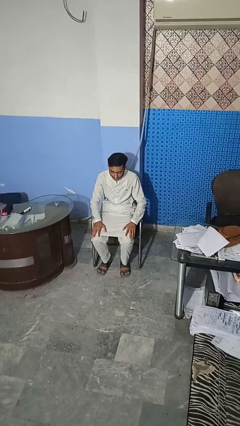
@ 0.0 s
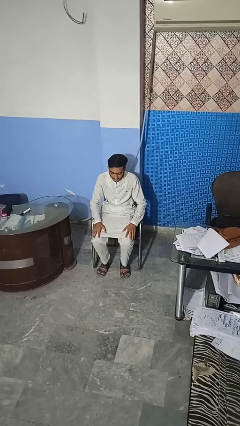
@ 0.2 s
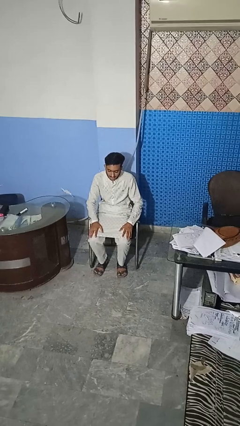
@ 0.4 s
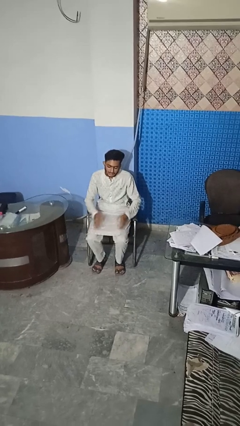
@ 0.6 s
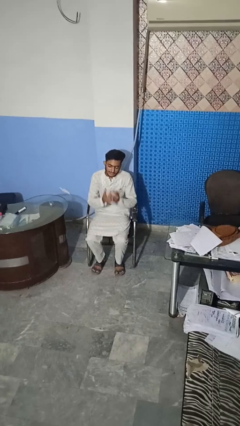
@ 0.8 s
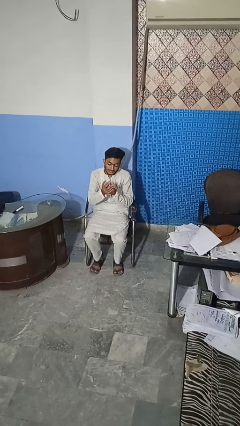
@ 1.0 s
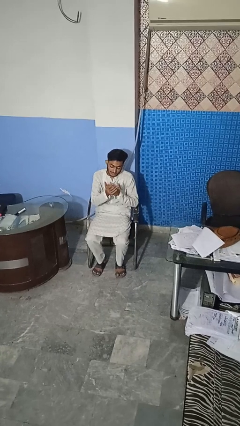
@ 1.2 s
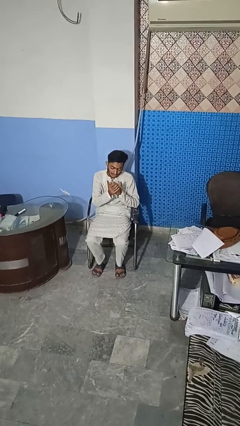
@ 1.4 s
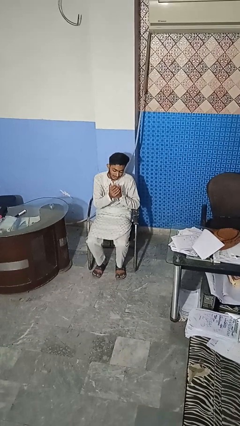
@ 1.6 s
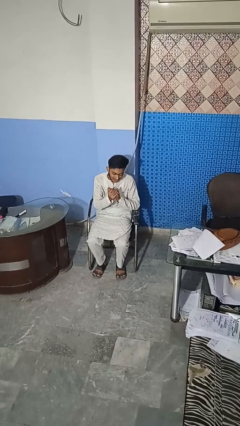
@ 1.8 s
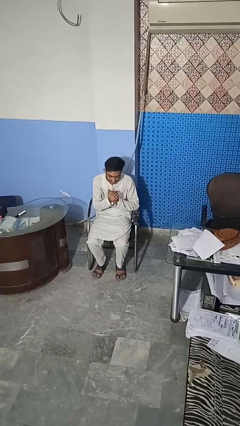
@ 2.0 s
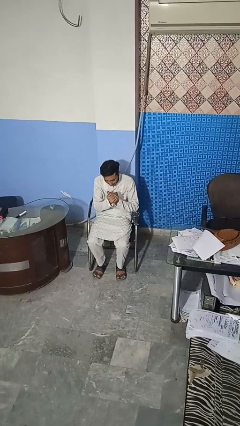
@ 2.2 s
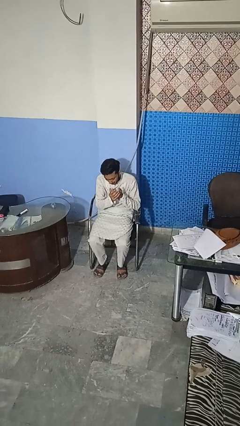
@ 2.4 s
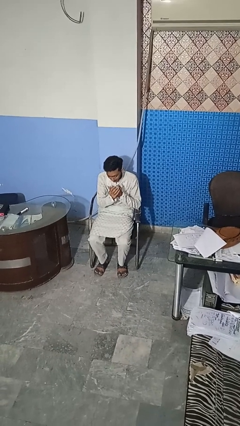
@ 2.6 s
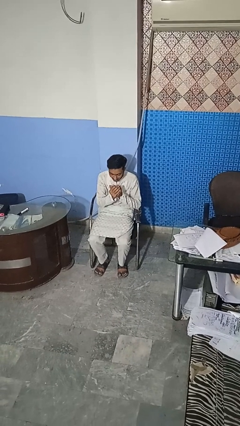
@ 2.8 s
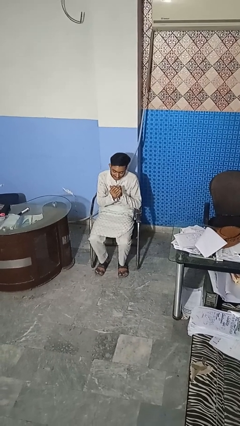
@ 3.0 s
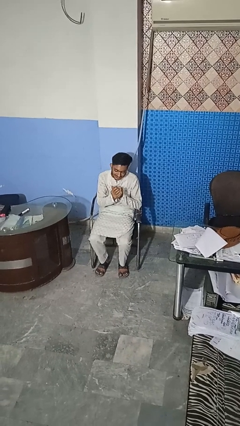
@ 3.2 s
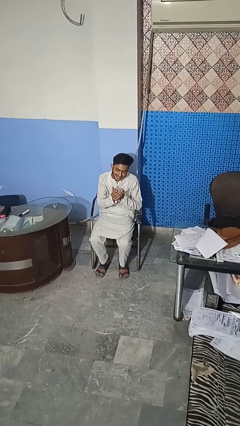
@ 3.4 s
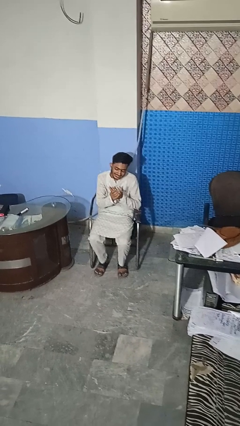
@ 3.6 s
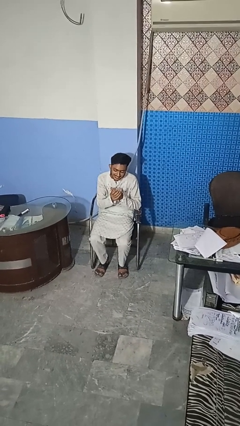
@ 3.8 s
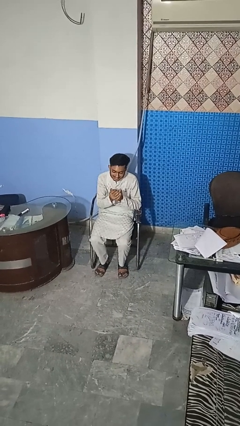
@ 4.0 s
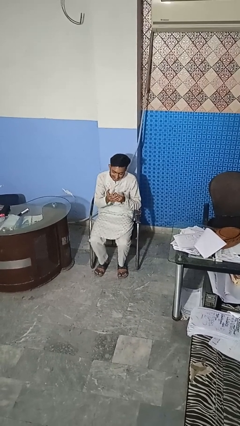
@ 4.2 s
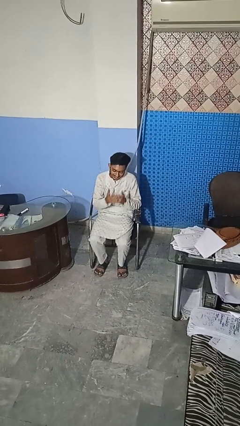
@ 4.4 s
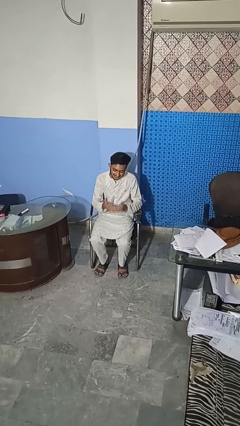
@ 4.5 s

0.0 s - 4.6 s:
person prays

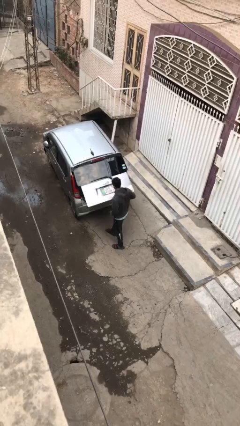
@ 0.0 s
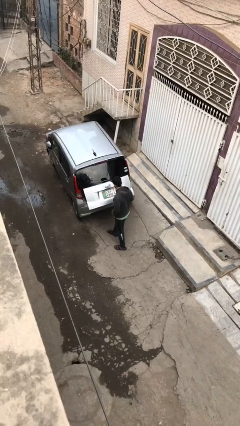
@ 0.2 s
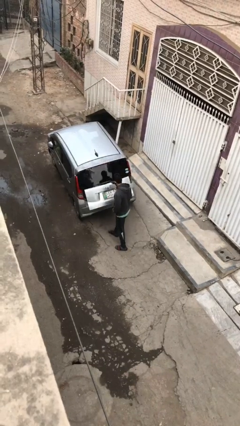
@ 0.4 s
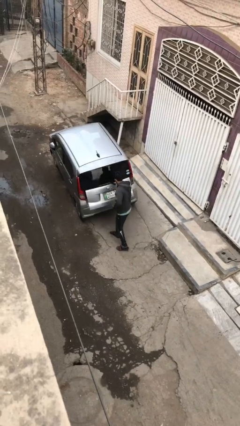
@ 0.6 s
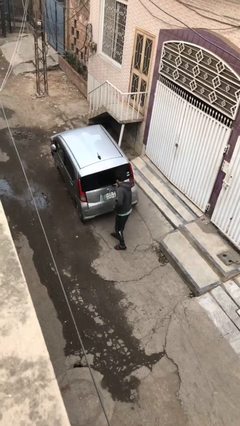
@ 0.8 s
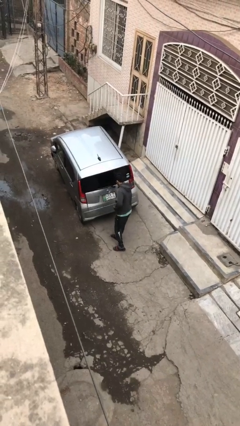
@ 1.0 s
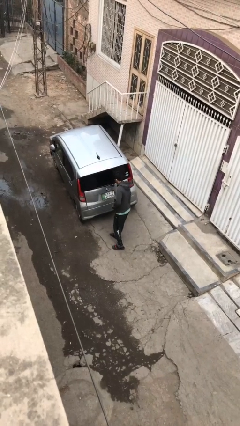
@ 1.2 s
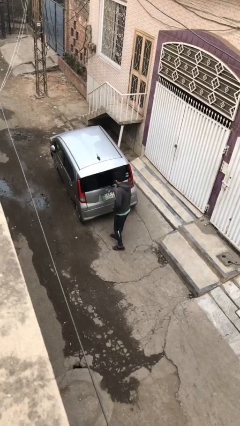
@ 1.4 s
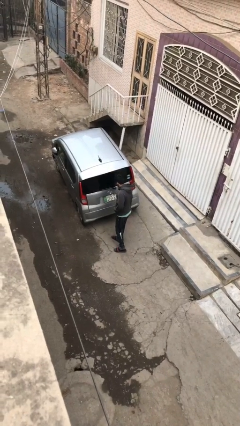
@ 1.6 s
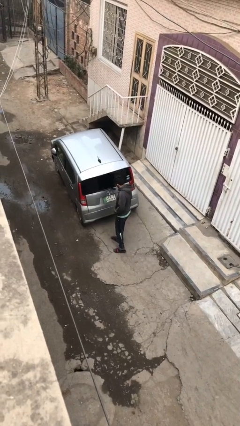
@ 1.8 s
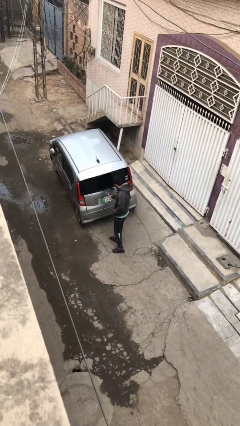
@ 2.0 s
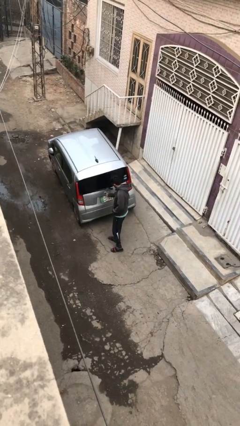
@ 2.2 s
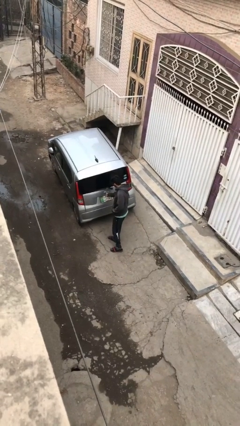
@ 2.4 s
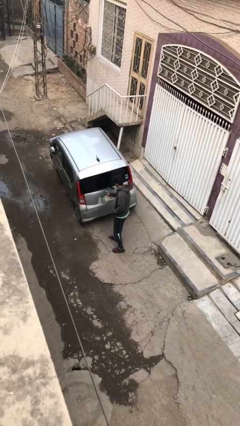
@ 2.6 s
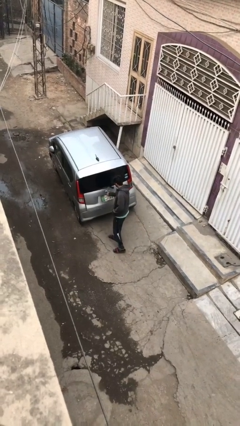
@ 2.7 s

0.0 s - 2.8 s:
person closes car trunk

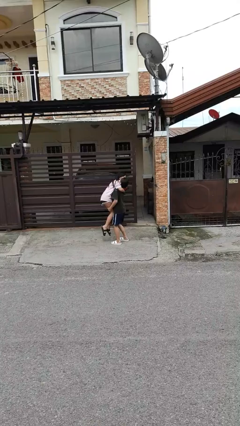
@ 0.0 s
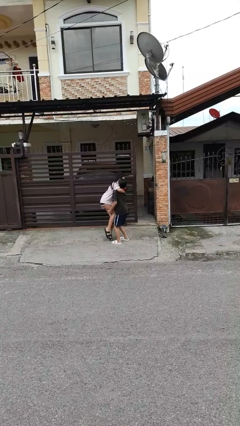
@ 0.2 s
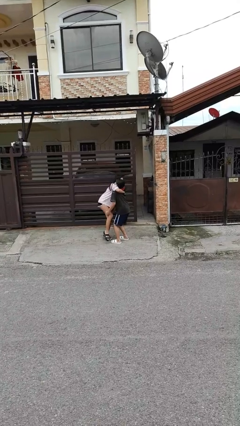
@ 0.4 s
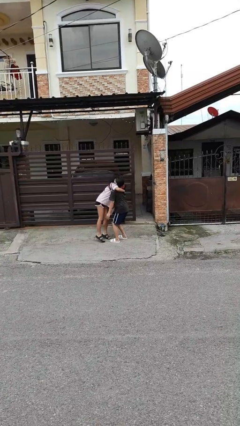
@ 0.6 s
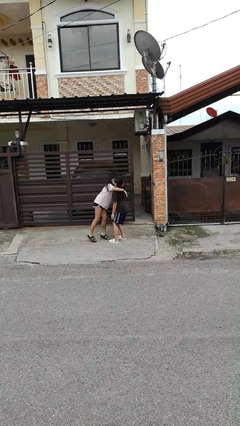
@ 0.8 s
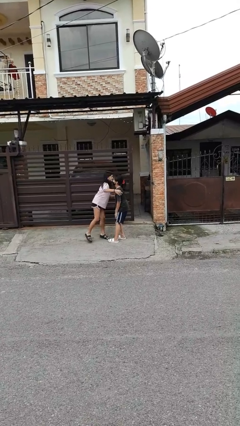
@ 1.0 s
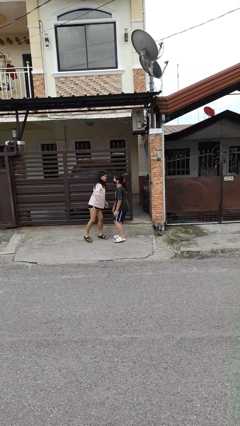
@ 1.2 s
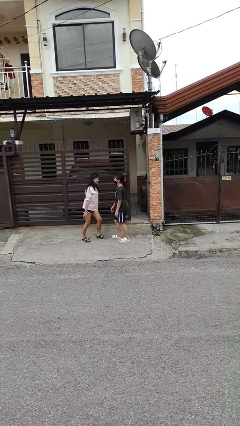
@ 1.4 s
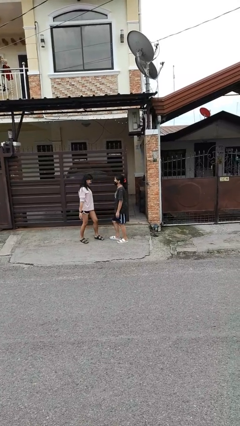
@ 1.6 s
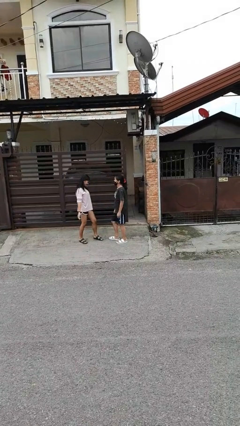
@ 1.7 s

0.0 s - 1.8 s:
person puts down person

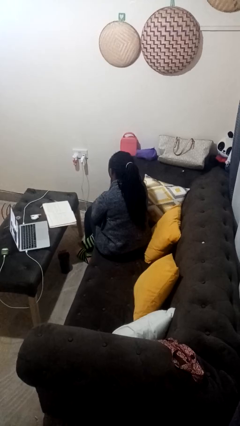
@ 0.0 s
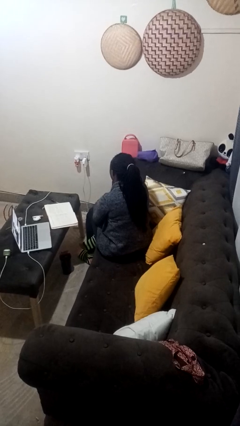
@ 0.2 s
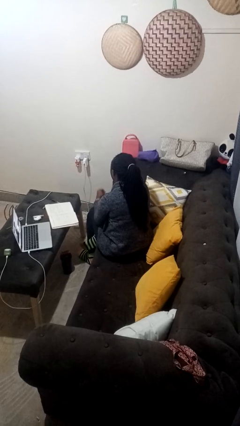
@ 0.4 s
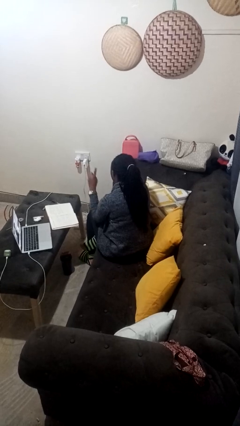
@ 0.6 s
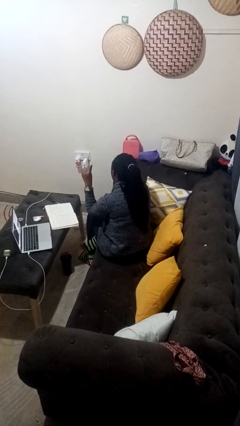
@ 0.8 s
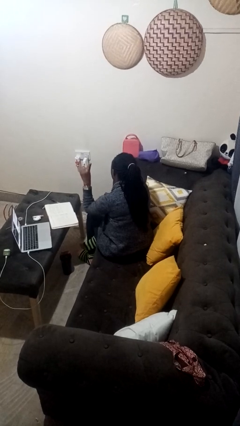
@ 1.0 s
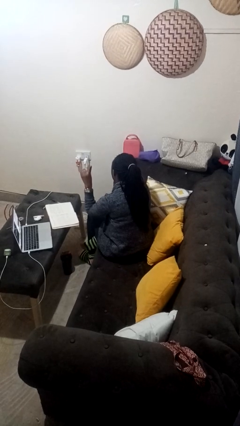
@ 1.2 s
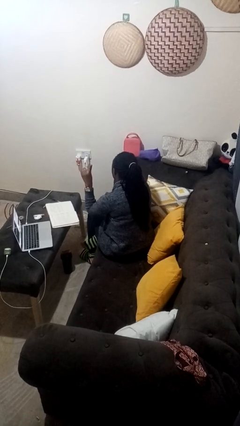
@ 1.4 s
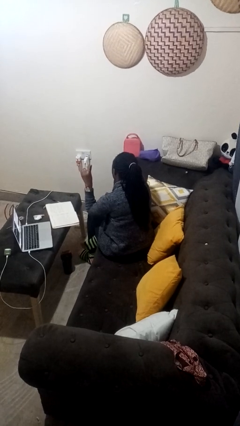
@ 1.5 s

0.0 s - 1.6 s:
person gestures number one

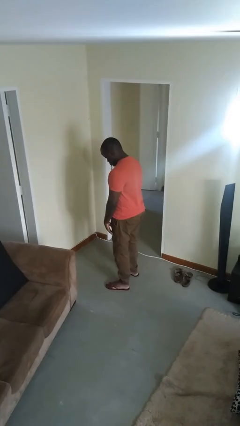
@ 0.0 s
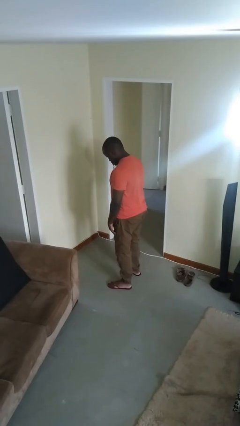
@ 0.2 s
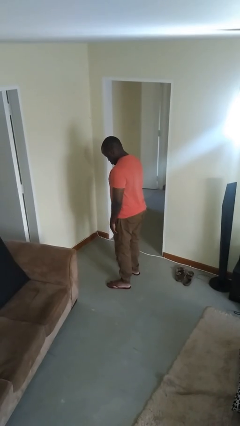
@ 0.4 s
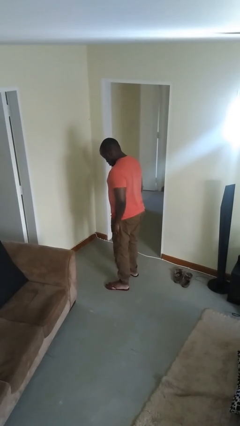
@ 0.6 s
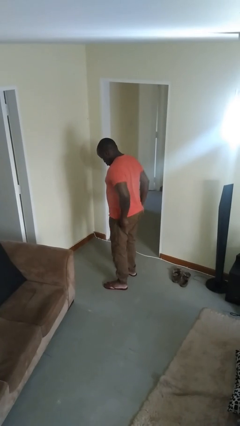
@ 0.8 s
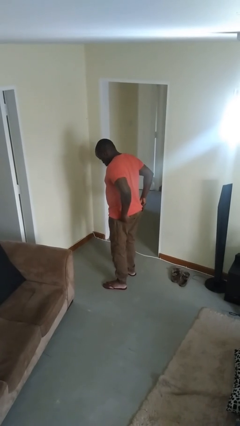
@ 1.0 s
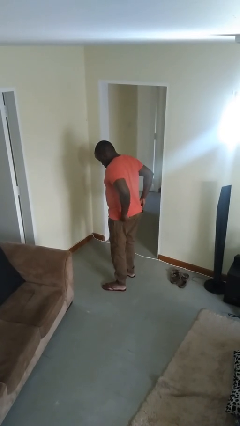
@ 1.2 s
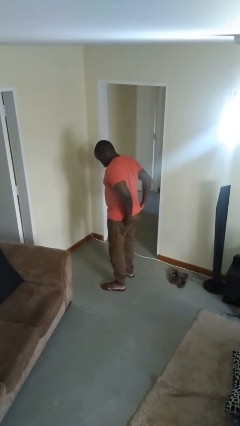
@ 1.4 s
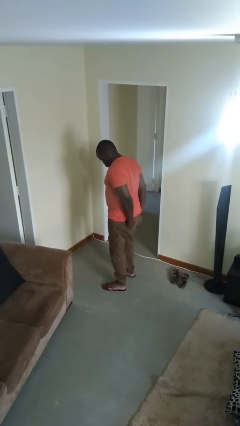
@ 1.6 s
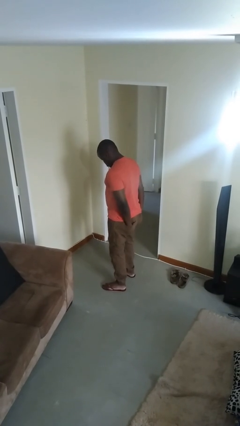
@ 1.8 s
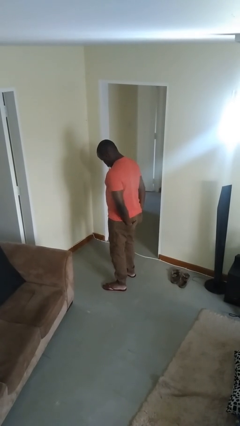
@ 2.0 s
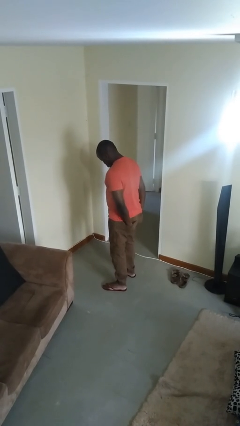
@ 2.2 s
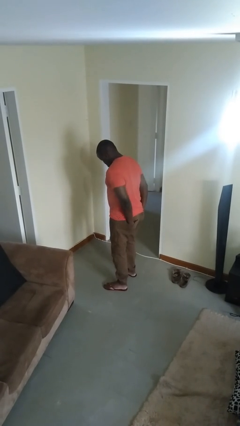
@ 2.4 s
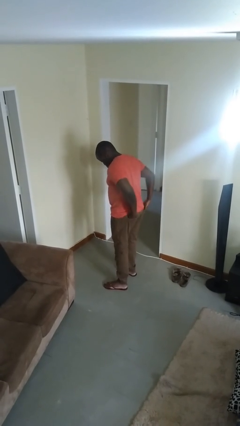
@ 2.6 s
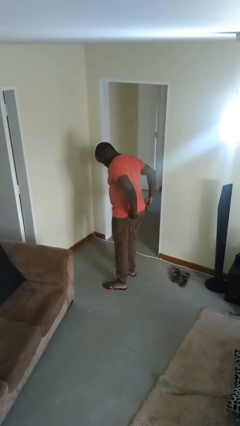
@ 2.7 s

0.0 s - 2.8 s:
person puts hands in back pockets

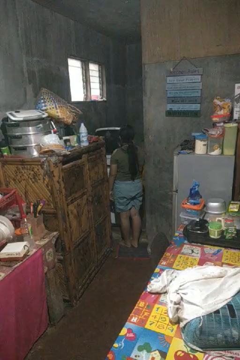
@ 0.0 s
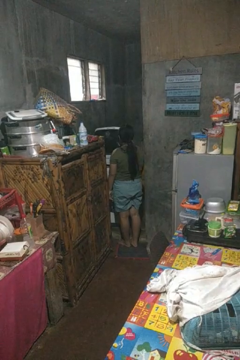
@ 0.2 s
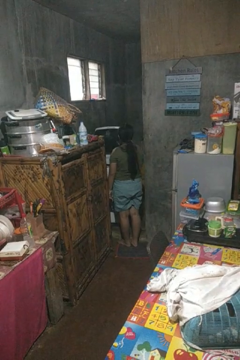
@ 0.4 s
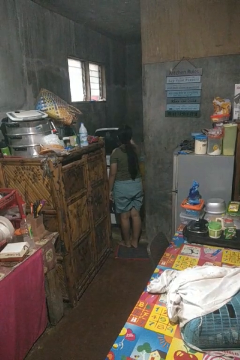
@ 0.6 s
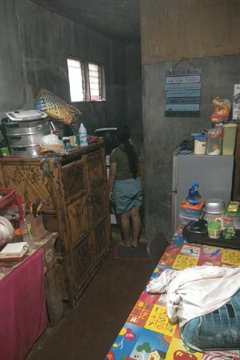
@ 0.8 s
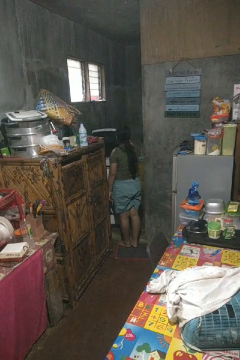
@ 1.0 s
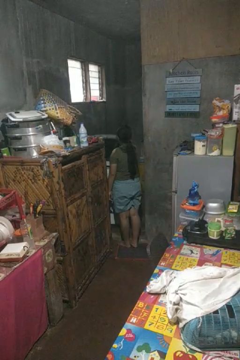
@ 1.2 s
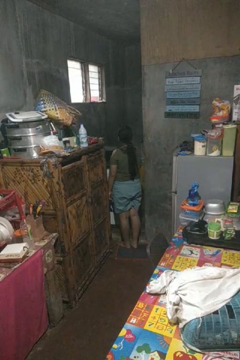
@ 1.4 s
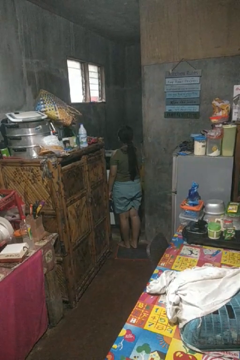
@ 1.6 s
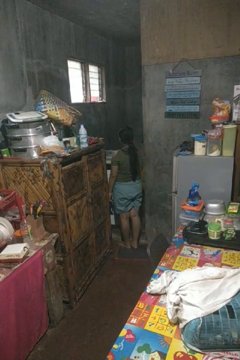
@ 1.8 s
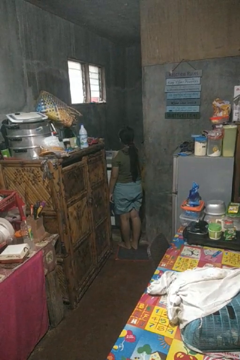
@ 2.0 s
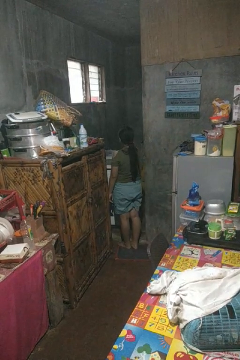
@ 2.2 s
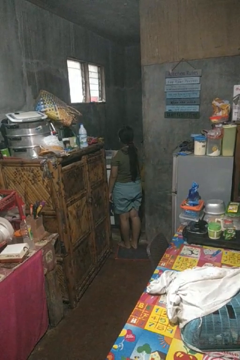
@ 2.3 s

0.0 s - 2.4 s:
person closes clothes washer

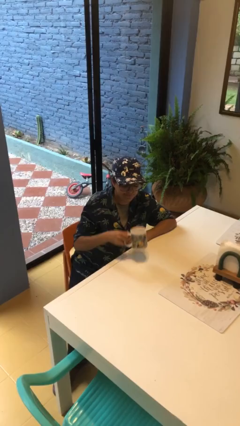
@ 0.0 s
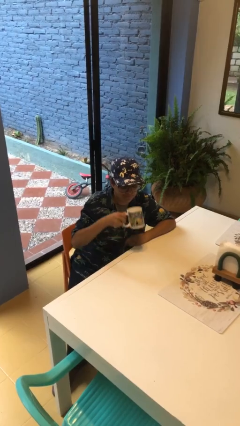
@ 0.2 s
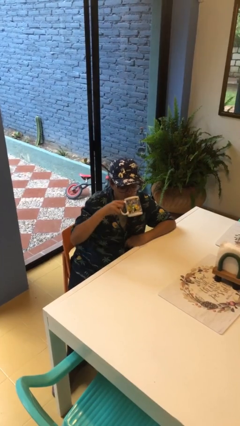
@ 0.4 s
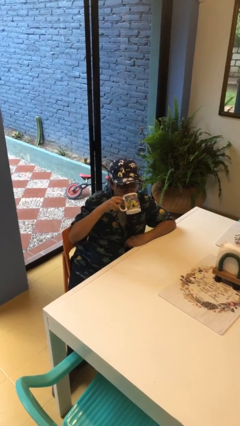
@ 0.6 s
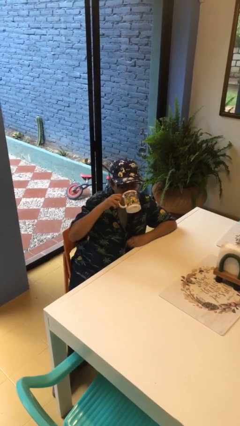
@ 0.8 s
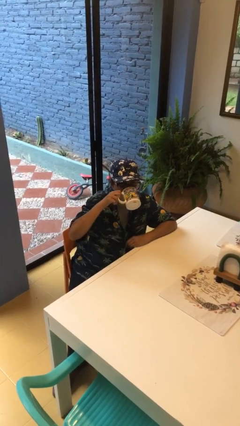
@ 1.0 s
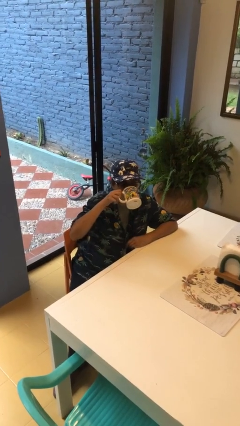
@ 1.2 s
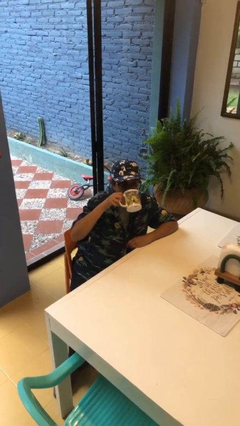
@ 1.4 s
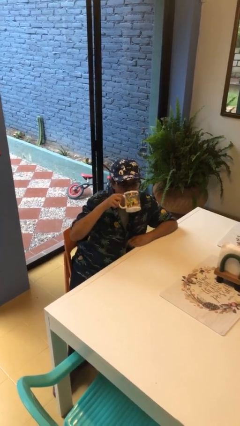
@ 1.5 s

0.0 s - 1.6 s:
person drinks from mug
